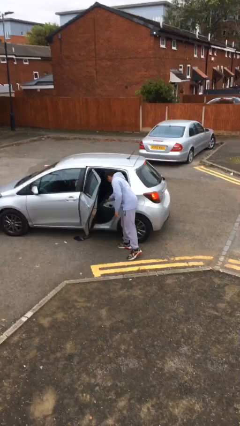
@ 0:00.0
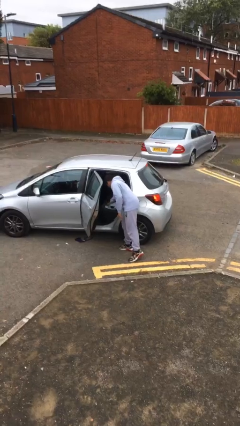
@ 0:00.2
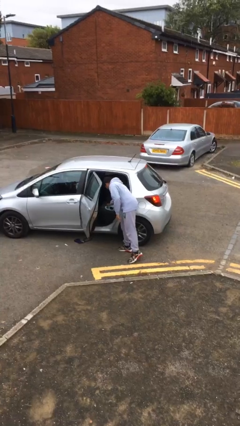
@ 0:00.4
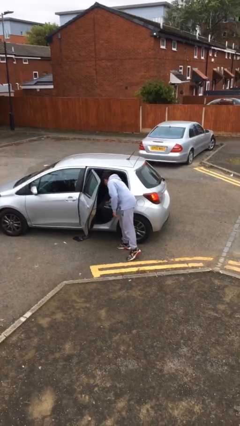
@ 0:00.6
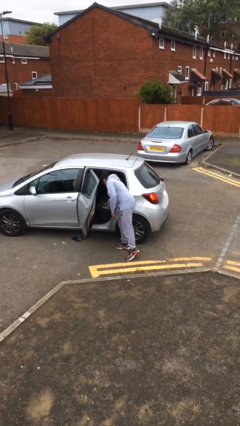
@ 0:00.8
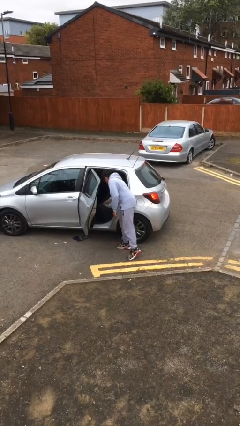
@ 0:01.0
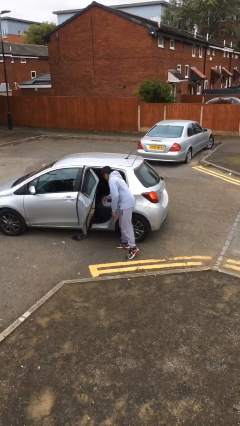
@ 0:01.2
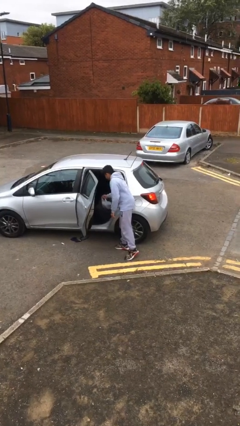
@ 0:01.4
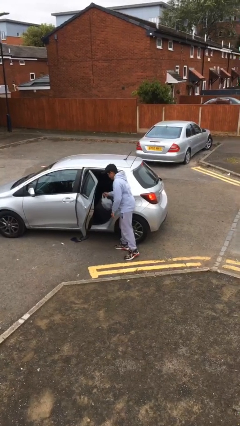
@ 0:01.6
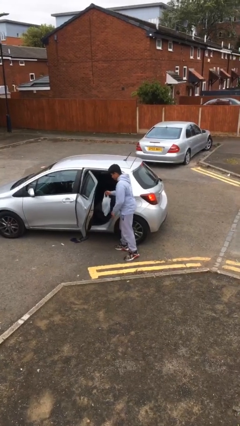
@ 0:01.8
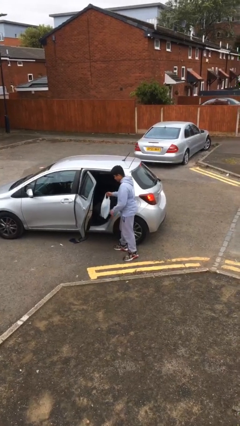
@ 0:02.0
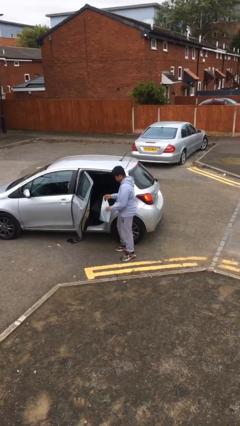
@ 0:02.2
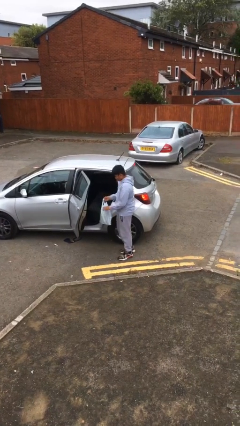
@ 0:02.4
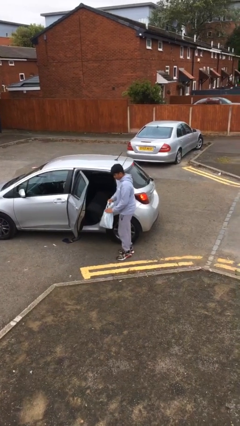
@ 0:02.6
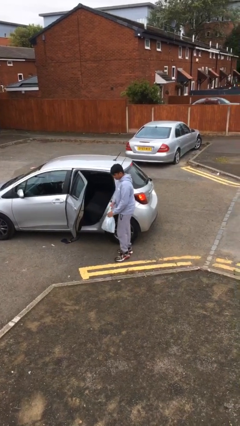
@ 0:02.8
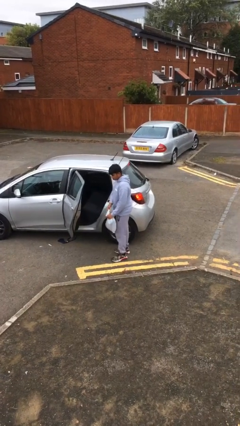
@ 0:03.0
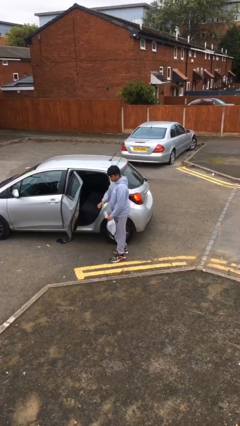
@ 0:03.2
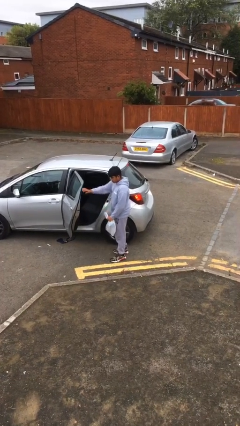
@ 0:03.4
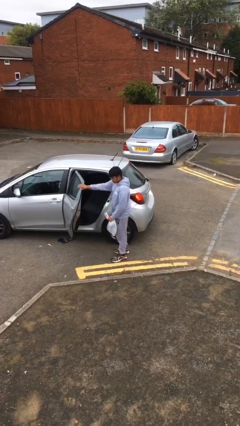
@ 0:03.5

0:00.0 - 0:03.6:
person unloads car

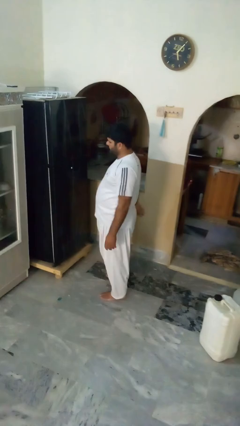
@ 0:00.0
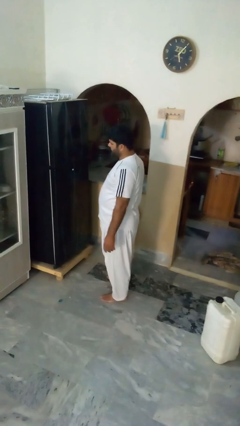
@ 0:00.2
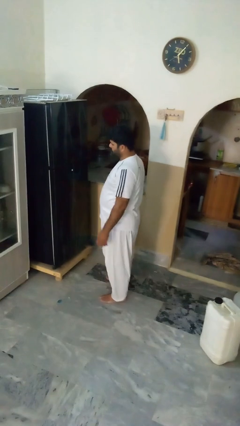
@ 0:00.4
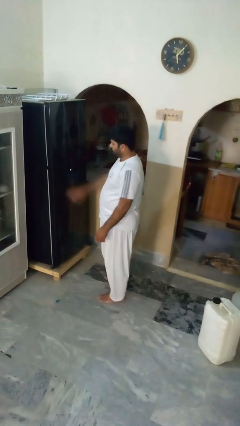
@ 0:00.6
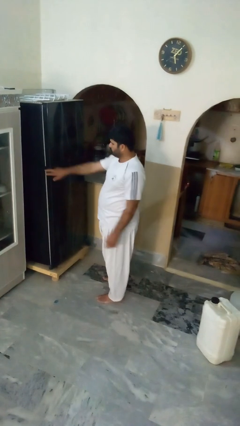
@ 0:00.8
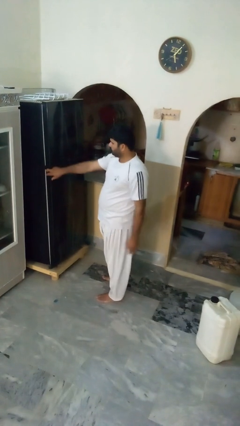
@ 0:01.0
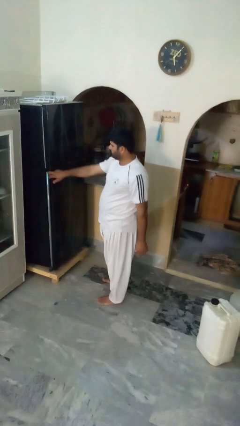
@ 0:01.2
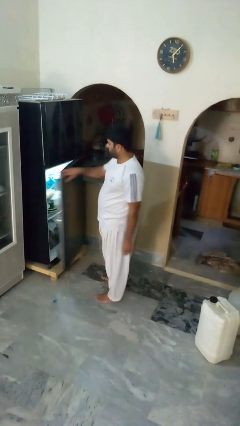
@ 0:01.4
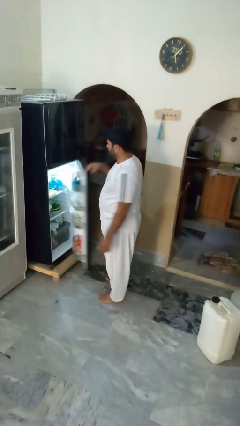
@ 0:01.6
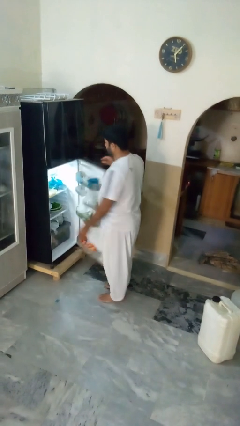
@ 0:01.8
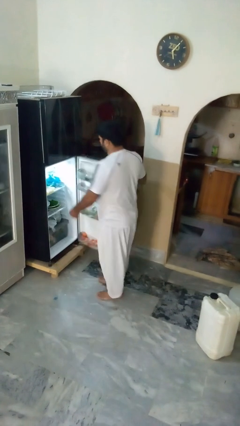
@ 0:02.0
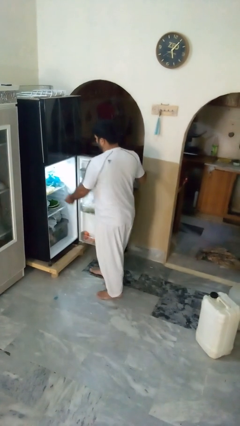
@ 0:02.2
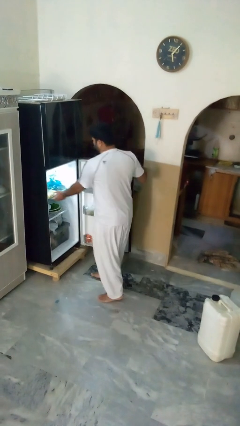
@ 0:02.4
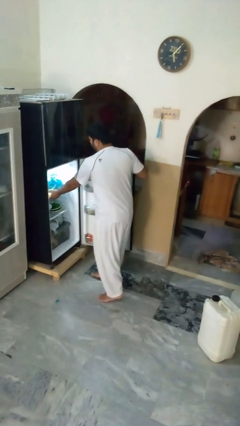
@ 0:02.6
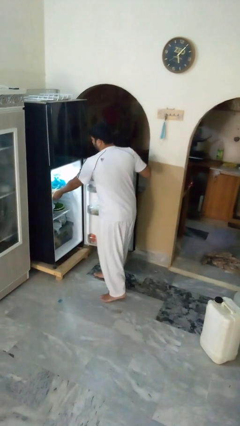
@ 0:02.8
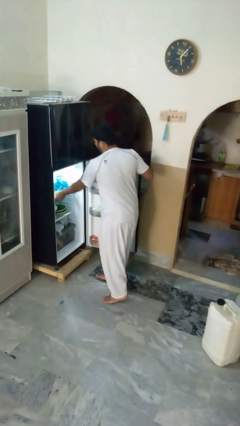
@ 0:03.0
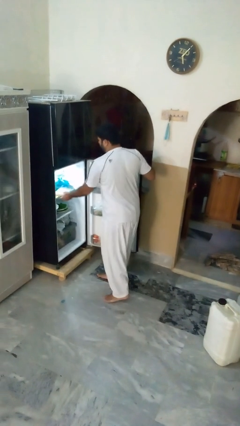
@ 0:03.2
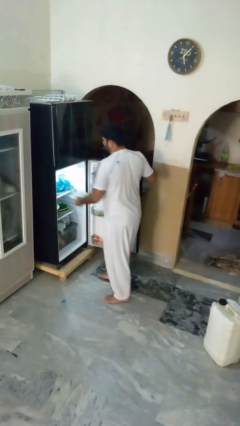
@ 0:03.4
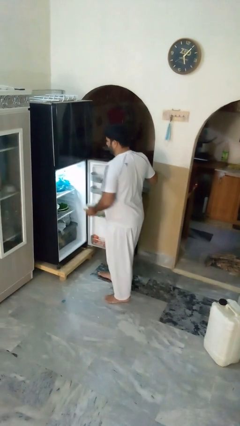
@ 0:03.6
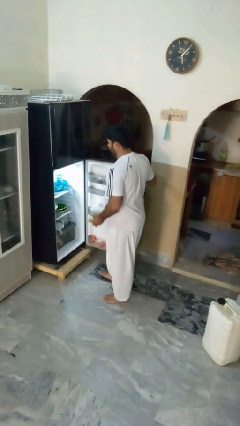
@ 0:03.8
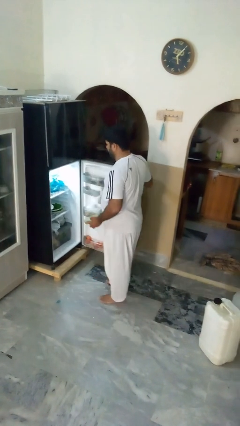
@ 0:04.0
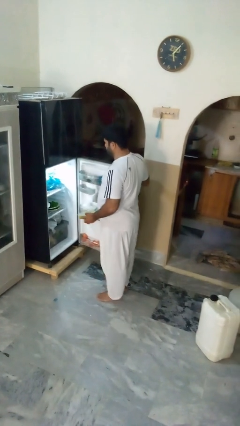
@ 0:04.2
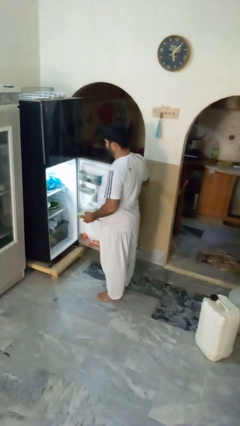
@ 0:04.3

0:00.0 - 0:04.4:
person takes object from refrigerator

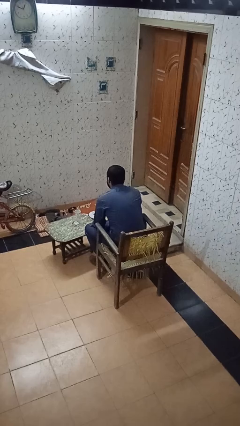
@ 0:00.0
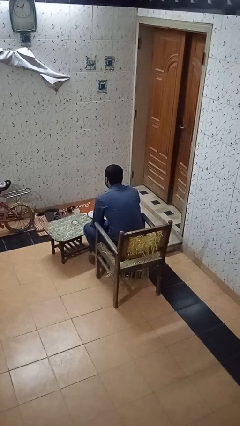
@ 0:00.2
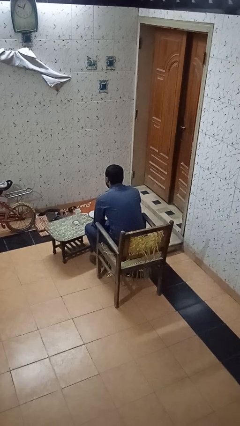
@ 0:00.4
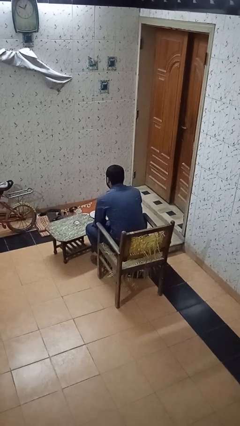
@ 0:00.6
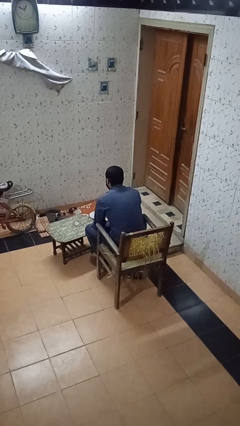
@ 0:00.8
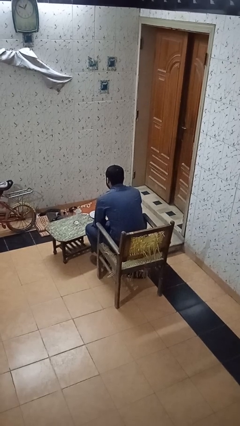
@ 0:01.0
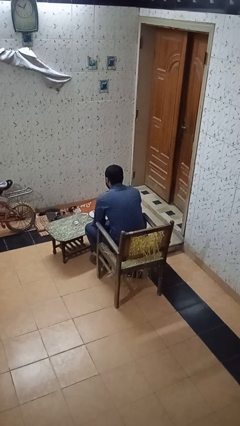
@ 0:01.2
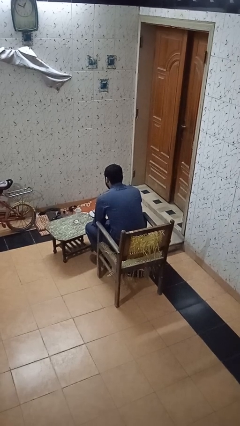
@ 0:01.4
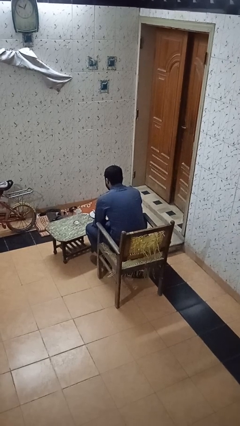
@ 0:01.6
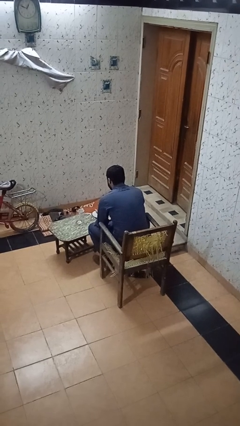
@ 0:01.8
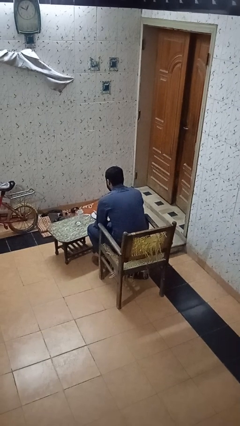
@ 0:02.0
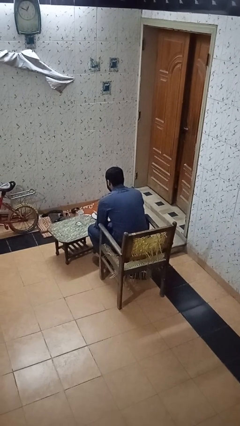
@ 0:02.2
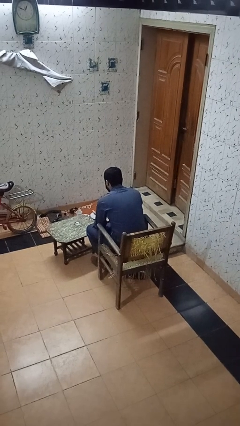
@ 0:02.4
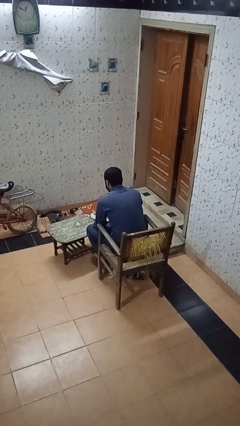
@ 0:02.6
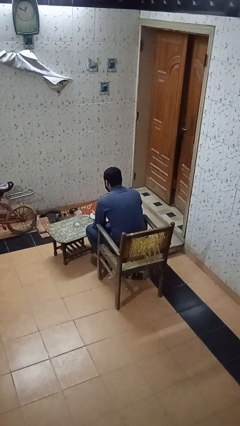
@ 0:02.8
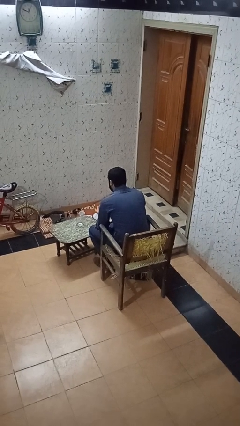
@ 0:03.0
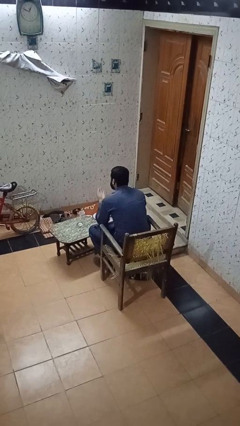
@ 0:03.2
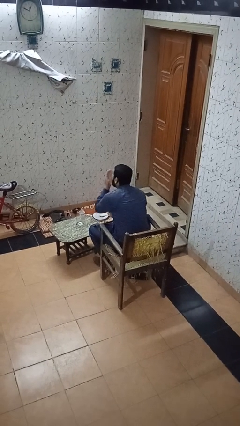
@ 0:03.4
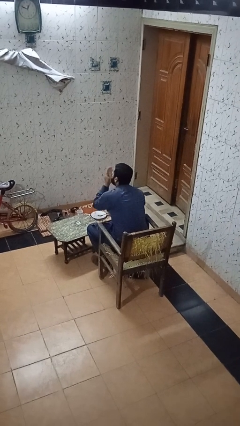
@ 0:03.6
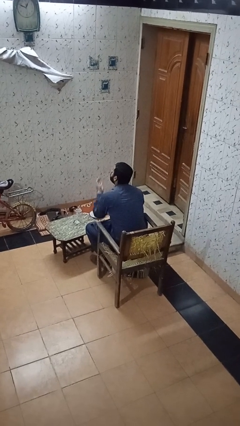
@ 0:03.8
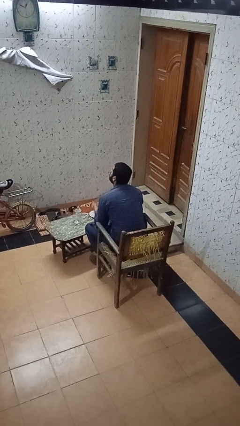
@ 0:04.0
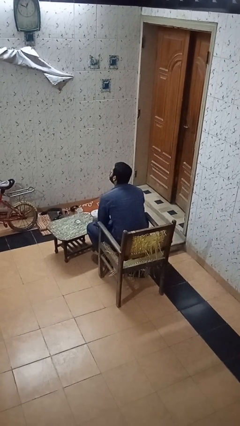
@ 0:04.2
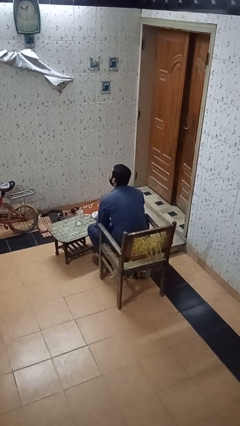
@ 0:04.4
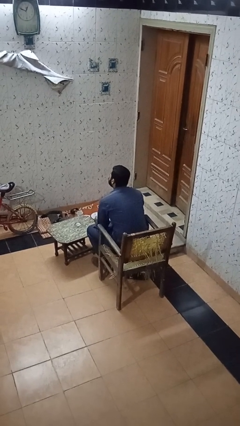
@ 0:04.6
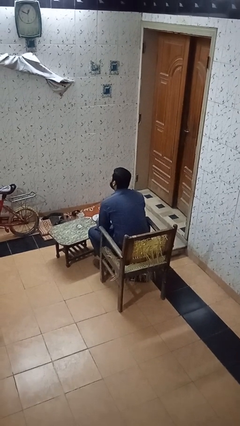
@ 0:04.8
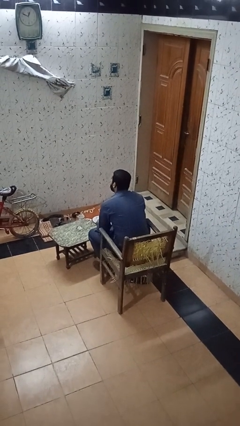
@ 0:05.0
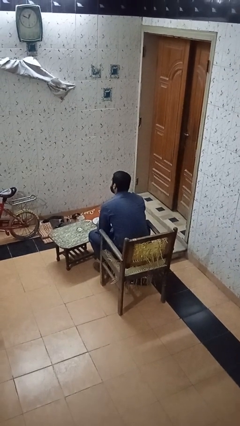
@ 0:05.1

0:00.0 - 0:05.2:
person takes medicine pills

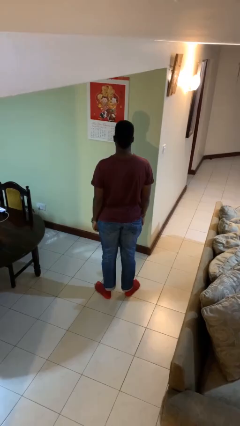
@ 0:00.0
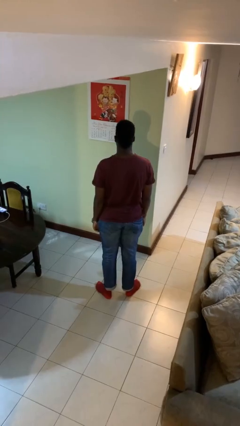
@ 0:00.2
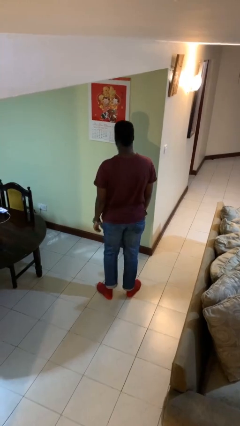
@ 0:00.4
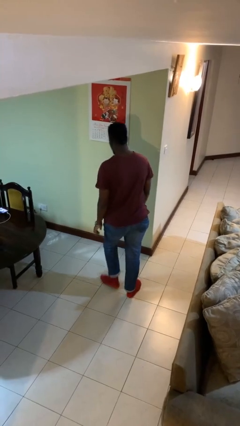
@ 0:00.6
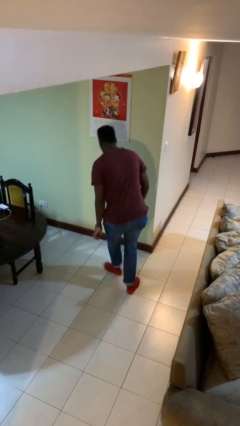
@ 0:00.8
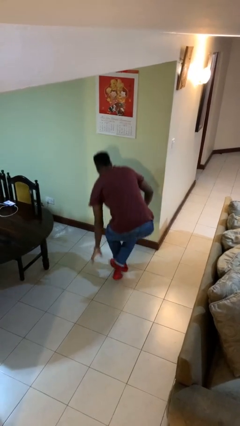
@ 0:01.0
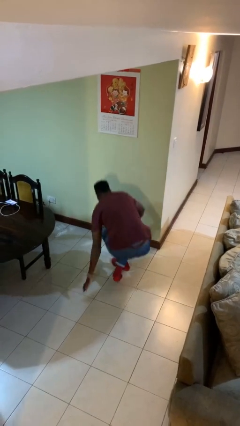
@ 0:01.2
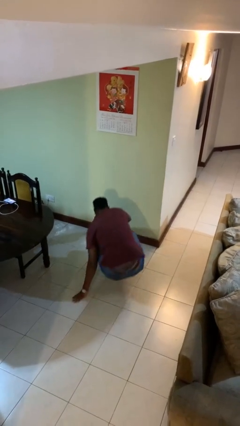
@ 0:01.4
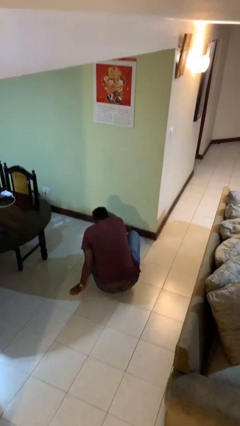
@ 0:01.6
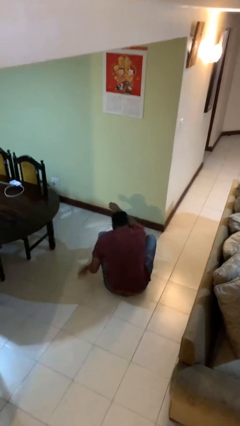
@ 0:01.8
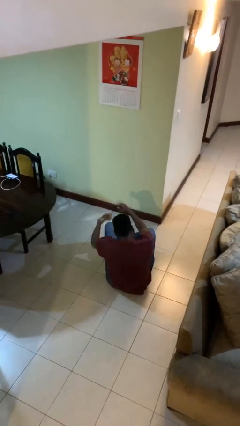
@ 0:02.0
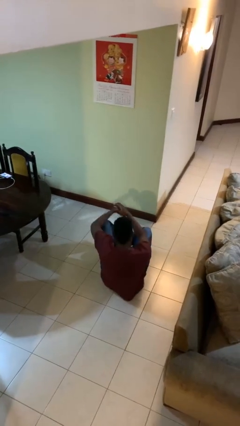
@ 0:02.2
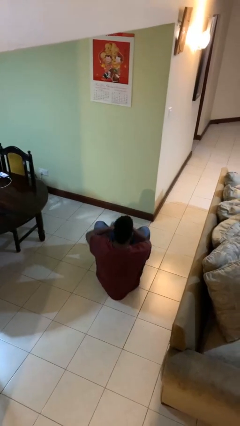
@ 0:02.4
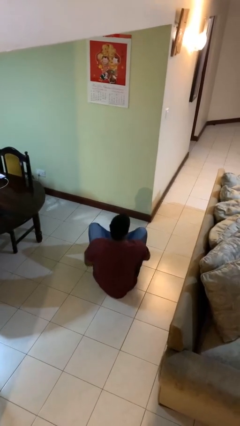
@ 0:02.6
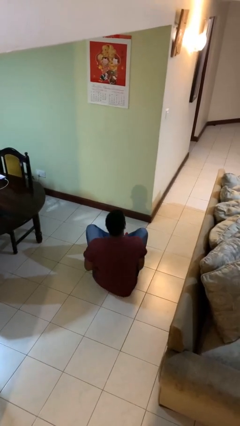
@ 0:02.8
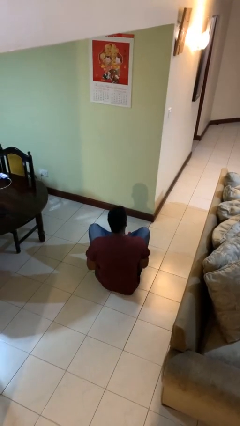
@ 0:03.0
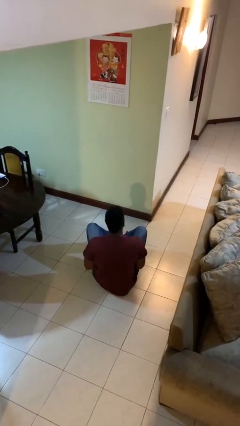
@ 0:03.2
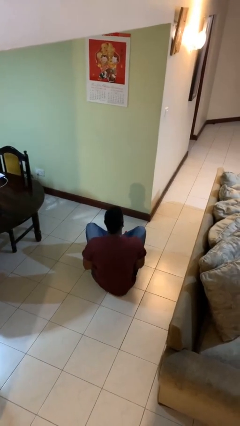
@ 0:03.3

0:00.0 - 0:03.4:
person sits crisscross

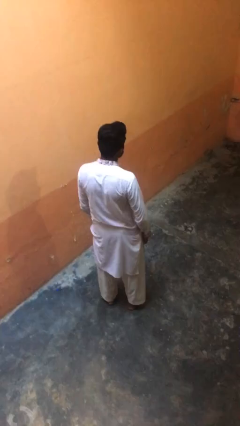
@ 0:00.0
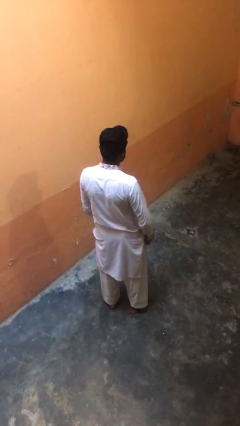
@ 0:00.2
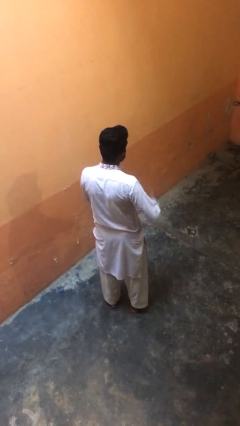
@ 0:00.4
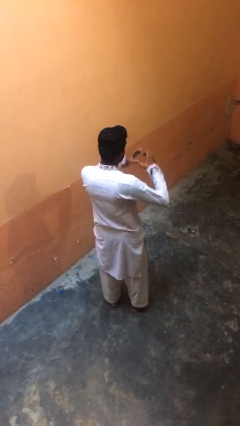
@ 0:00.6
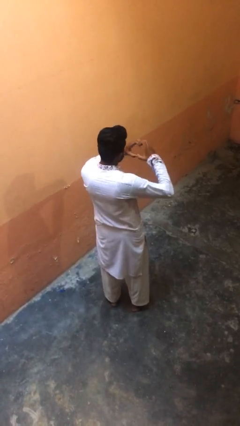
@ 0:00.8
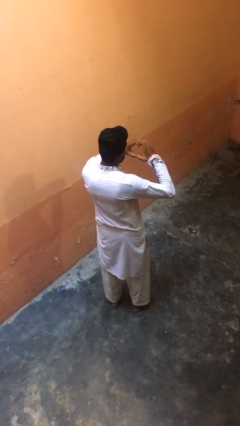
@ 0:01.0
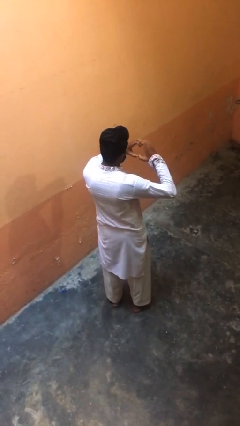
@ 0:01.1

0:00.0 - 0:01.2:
person gestures heart
